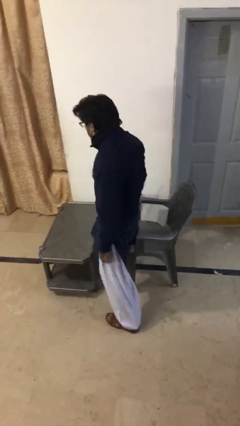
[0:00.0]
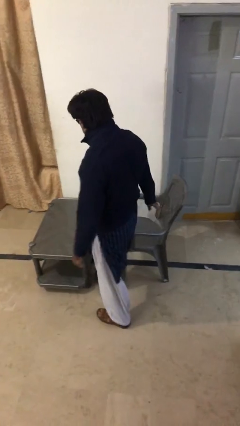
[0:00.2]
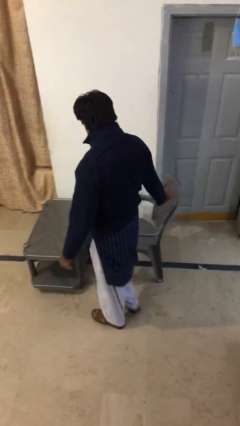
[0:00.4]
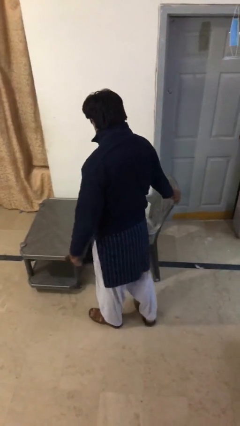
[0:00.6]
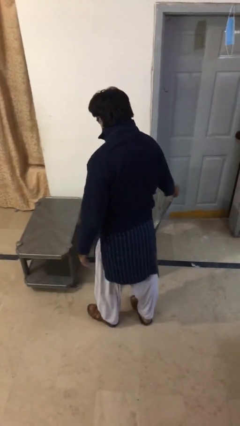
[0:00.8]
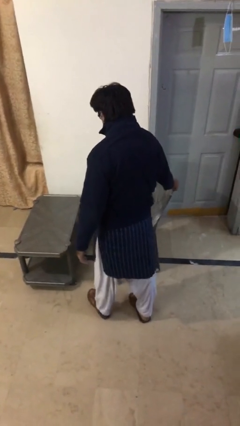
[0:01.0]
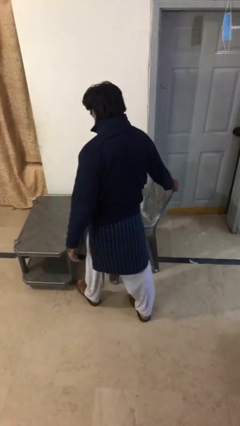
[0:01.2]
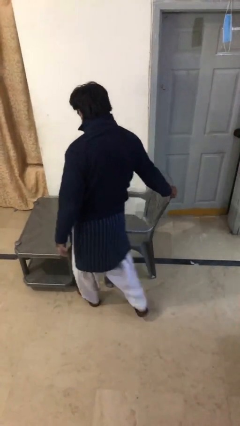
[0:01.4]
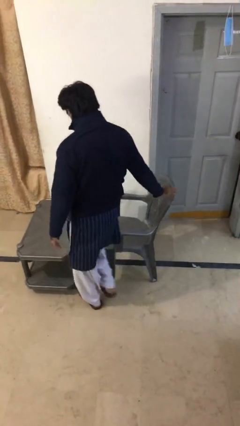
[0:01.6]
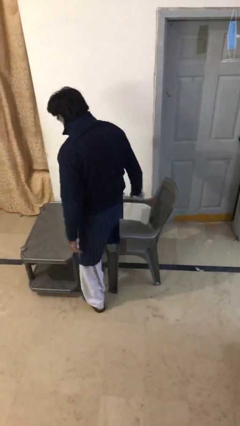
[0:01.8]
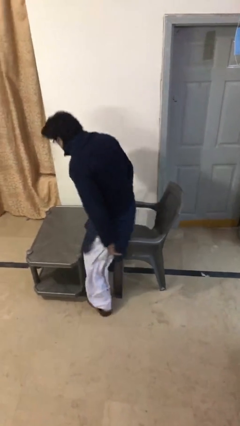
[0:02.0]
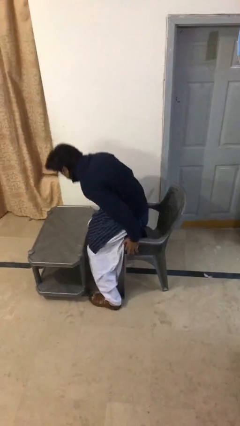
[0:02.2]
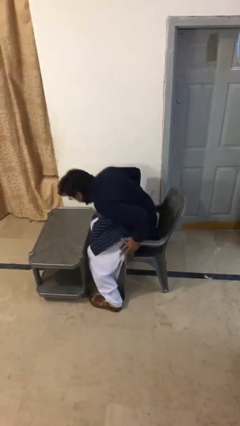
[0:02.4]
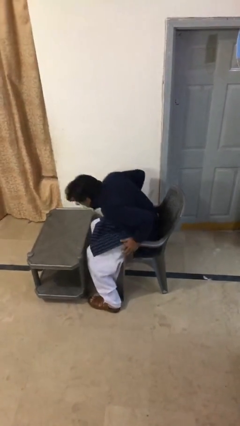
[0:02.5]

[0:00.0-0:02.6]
person sits down

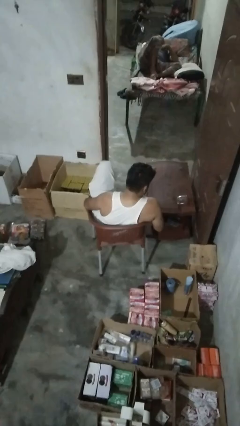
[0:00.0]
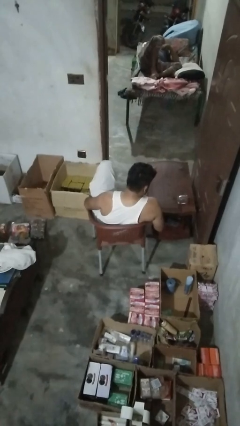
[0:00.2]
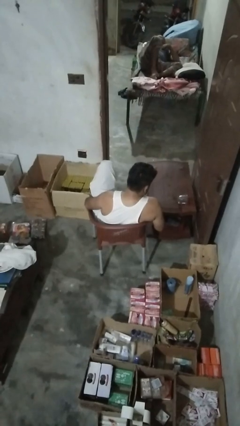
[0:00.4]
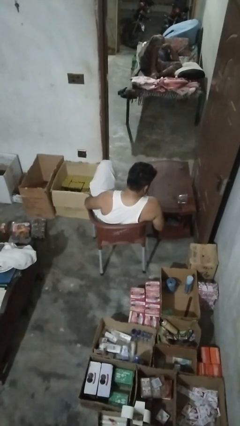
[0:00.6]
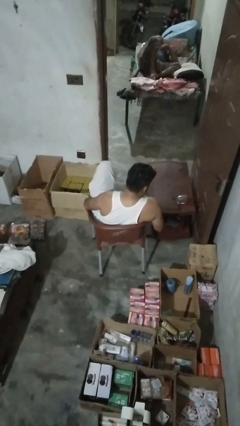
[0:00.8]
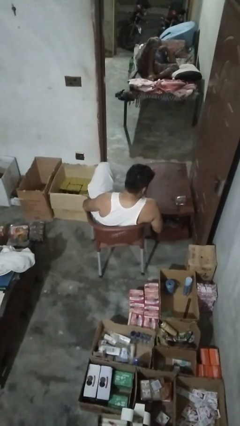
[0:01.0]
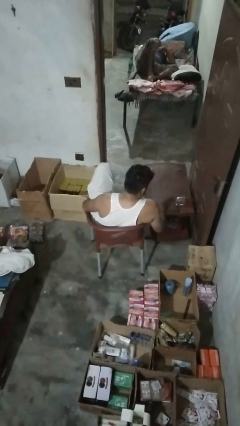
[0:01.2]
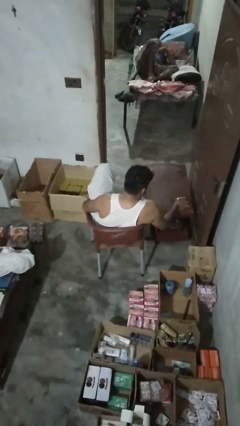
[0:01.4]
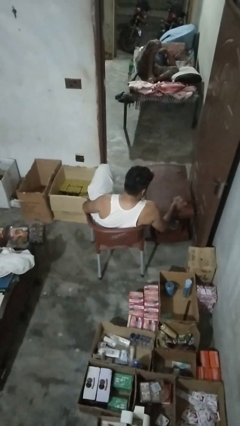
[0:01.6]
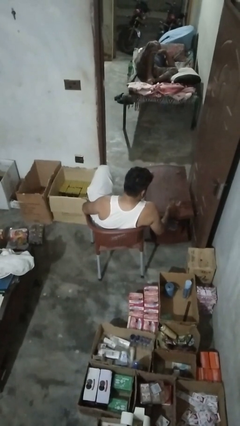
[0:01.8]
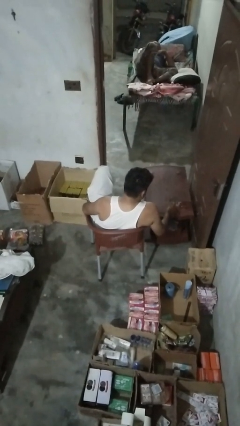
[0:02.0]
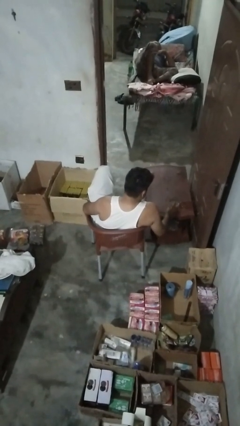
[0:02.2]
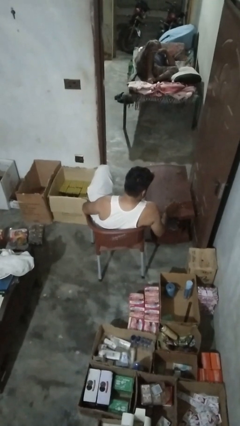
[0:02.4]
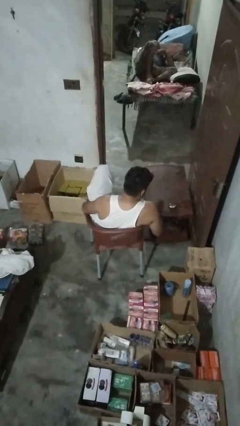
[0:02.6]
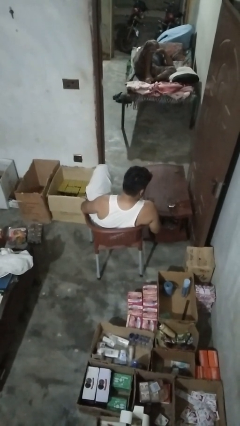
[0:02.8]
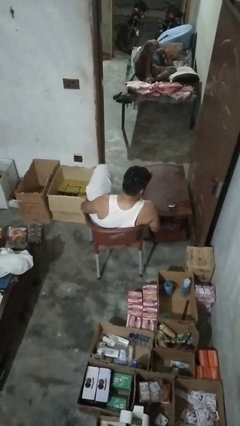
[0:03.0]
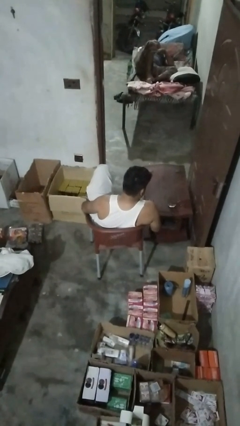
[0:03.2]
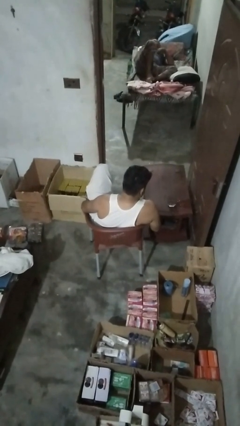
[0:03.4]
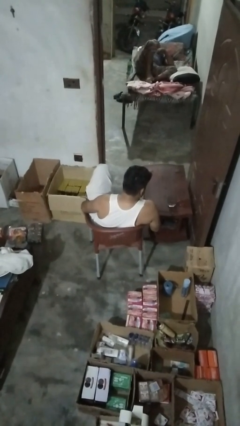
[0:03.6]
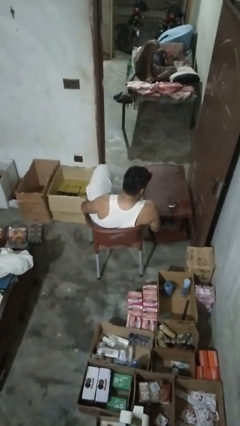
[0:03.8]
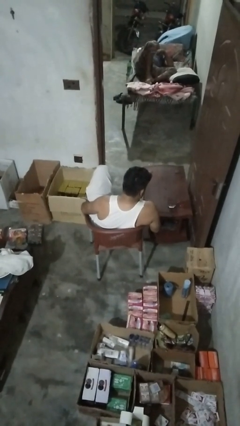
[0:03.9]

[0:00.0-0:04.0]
person sets upright glass

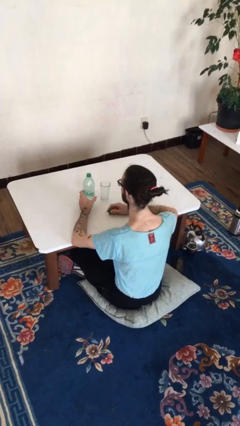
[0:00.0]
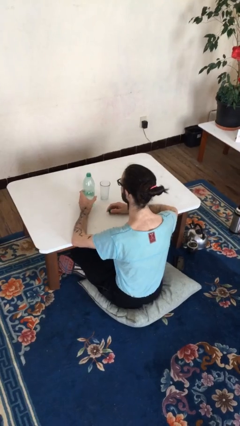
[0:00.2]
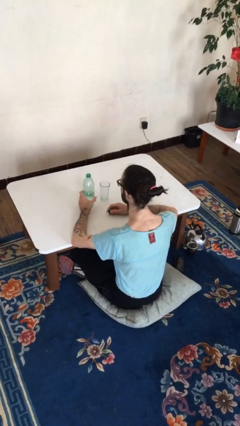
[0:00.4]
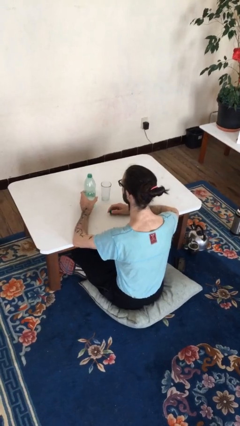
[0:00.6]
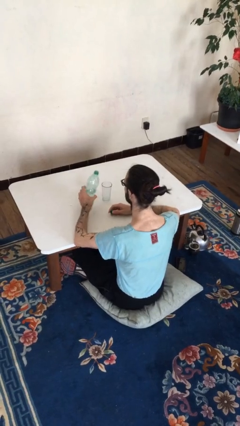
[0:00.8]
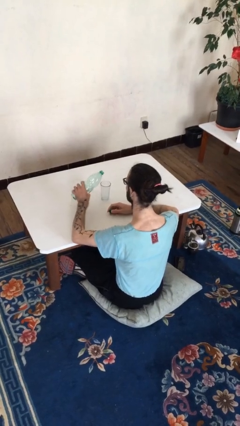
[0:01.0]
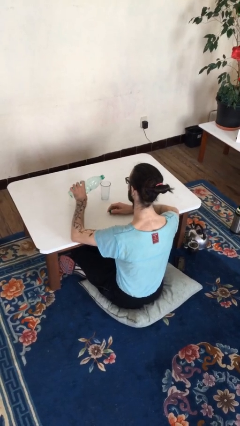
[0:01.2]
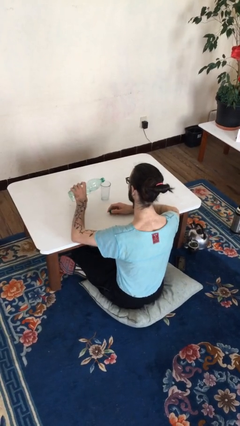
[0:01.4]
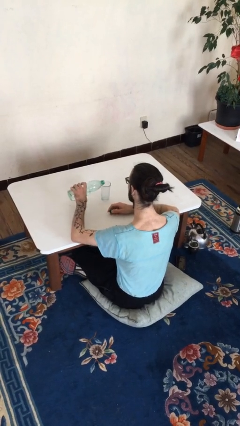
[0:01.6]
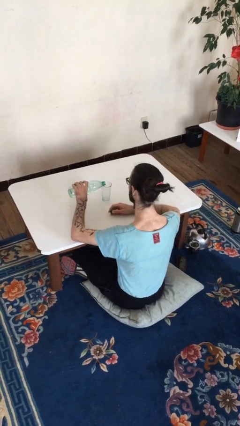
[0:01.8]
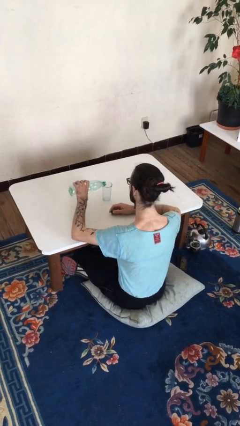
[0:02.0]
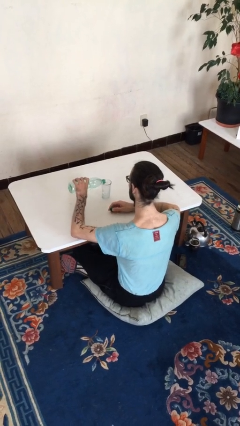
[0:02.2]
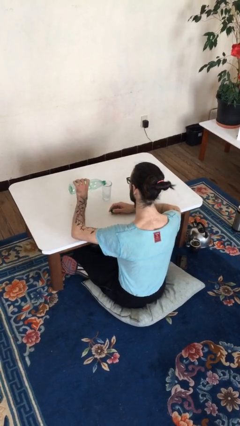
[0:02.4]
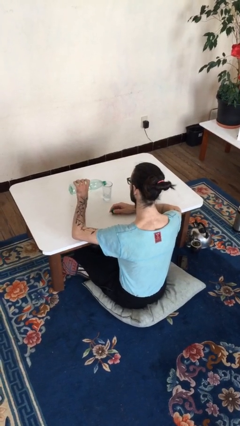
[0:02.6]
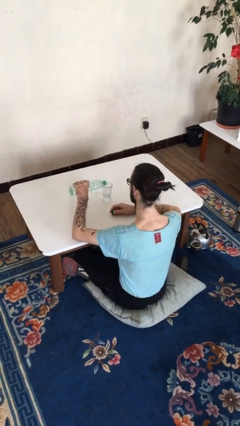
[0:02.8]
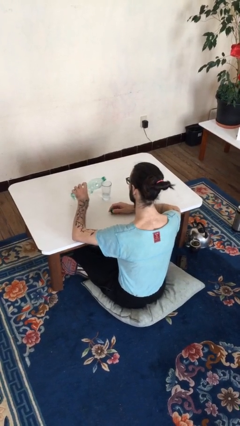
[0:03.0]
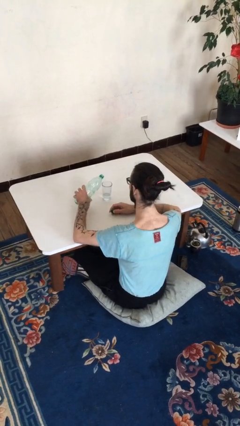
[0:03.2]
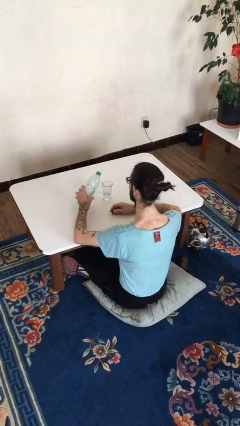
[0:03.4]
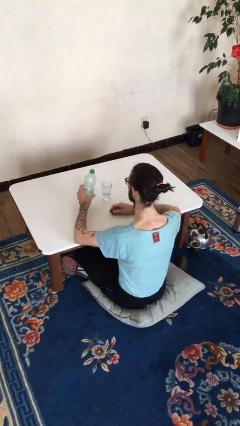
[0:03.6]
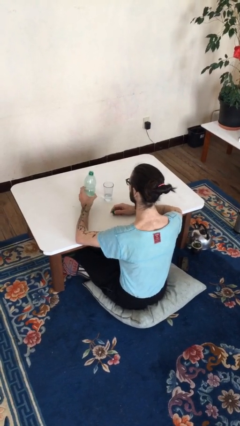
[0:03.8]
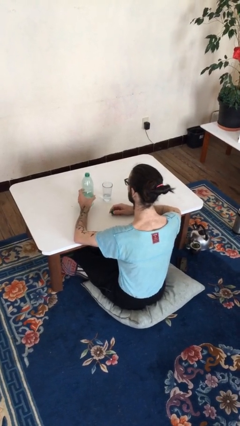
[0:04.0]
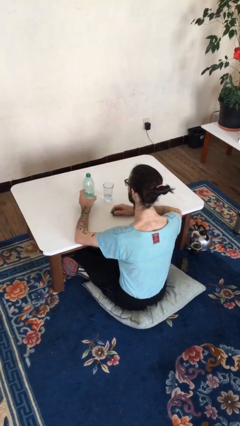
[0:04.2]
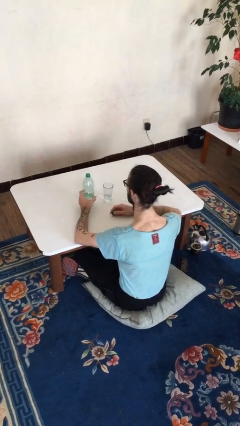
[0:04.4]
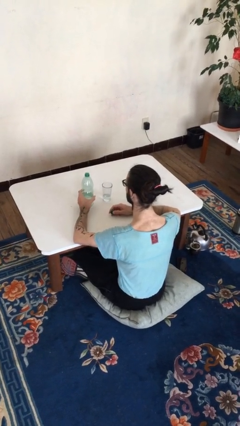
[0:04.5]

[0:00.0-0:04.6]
person pours liquid into cup

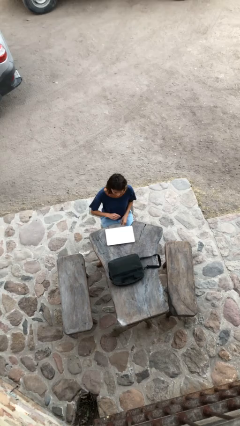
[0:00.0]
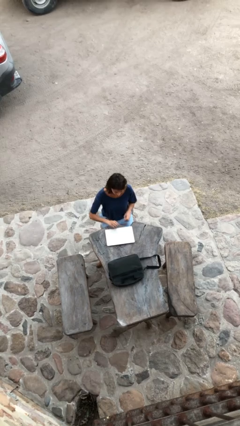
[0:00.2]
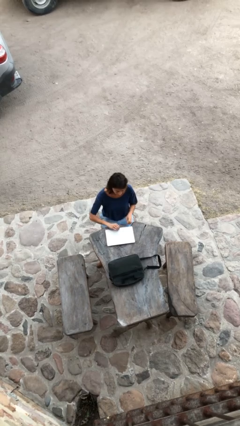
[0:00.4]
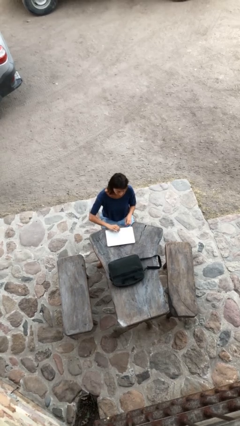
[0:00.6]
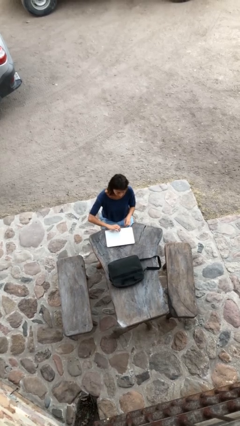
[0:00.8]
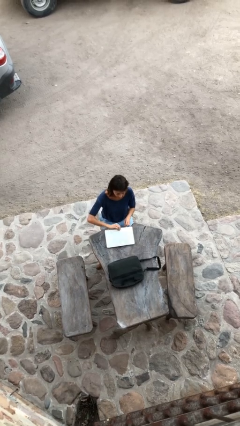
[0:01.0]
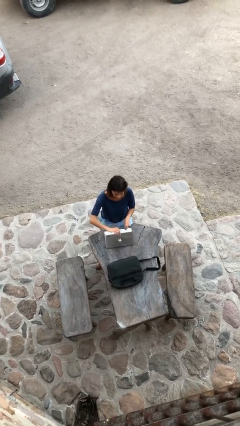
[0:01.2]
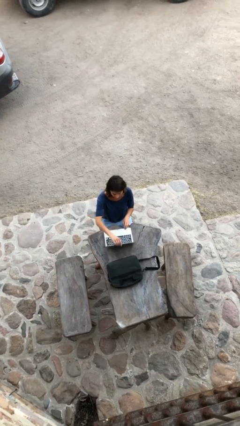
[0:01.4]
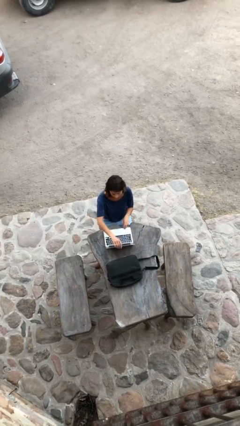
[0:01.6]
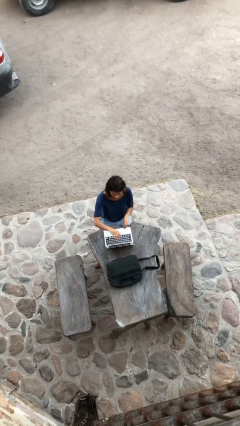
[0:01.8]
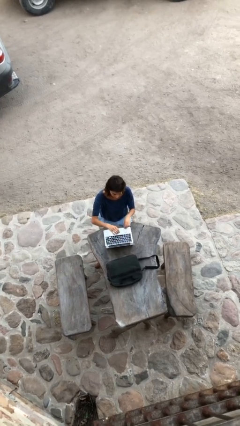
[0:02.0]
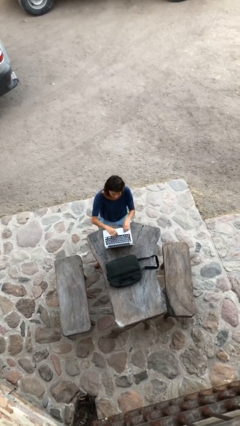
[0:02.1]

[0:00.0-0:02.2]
person interacts with laptop

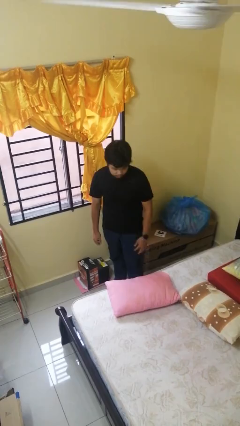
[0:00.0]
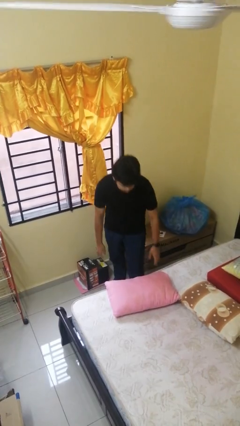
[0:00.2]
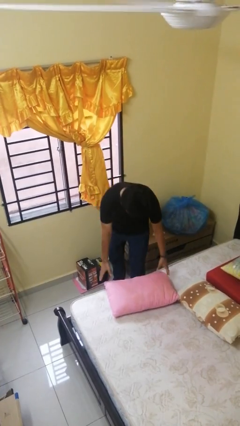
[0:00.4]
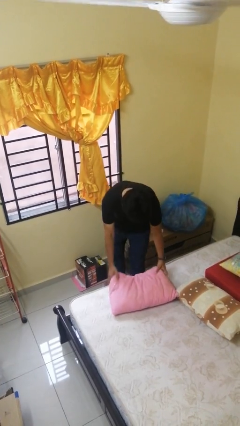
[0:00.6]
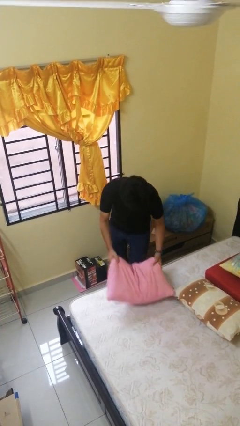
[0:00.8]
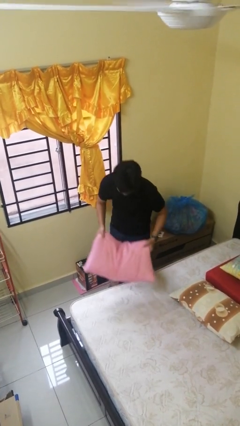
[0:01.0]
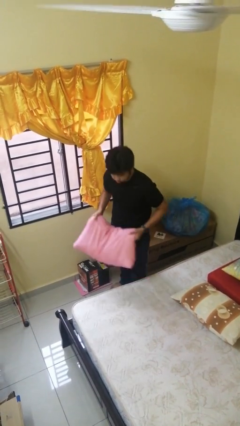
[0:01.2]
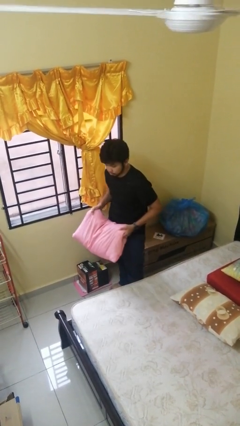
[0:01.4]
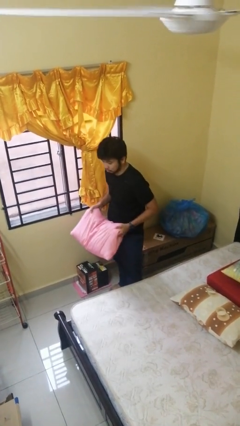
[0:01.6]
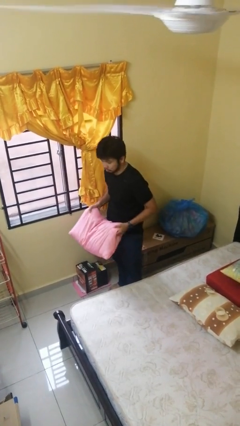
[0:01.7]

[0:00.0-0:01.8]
person picks up object from bed

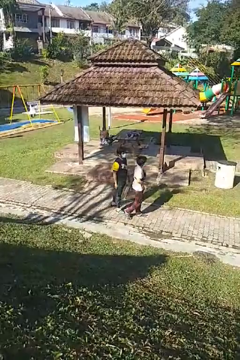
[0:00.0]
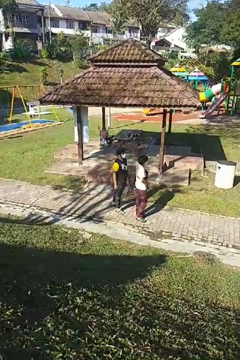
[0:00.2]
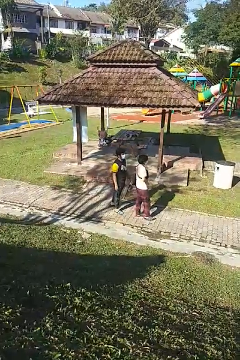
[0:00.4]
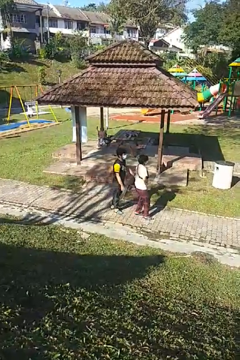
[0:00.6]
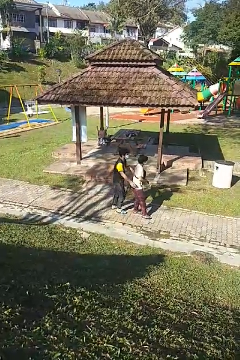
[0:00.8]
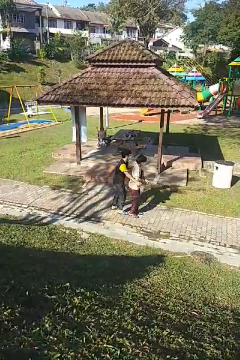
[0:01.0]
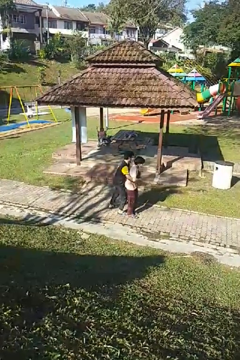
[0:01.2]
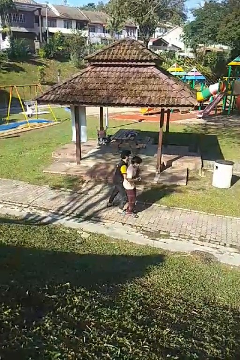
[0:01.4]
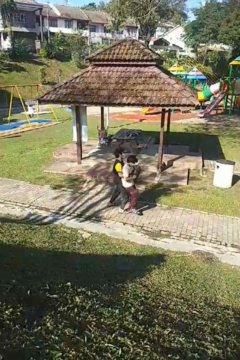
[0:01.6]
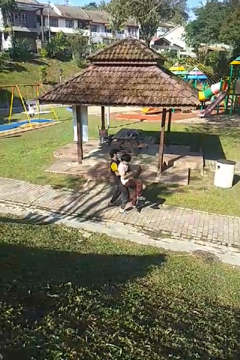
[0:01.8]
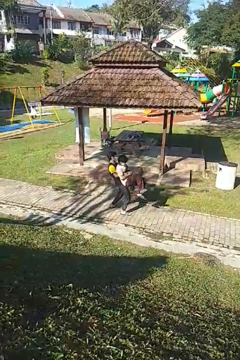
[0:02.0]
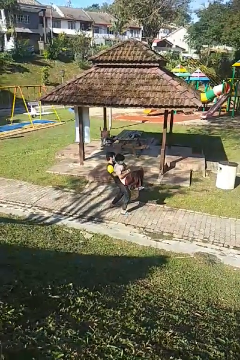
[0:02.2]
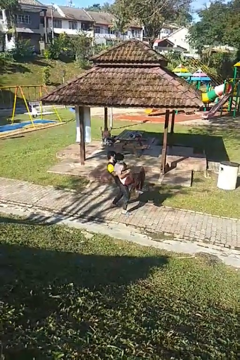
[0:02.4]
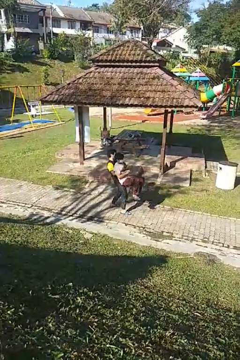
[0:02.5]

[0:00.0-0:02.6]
person picks up person
